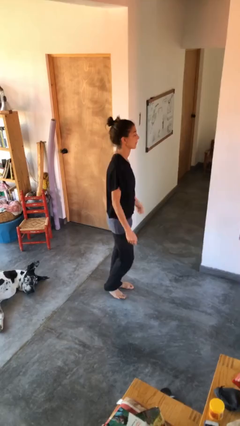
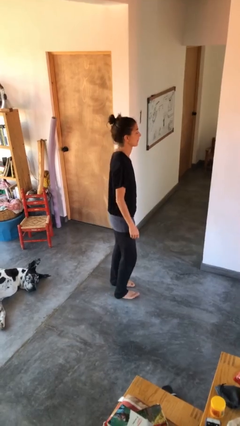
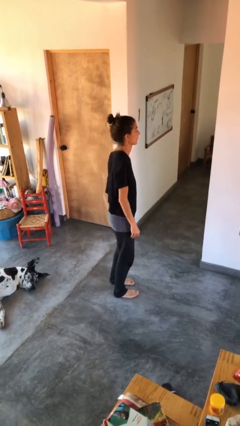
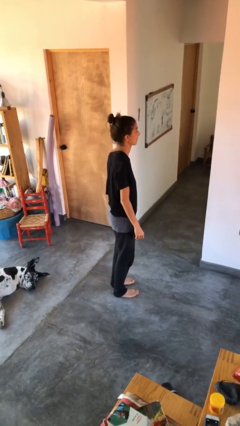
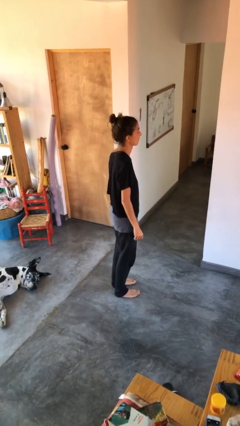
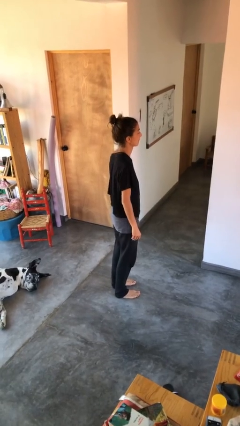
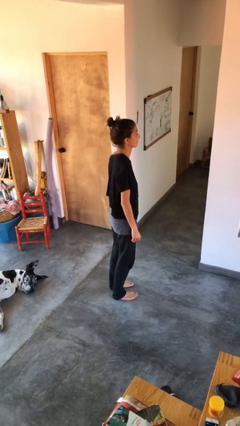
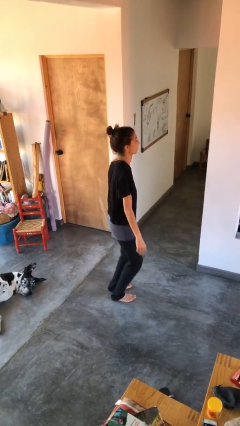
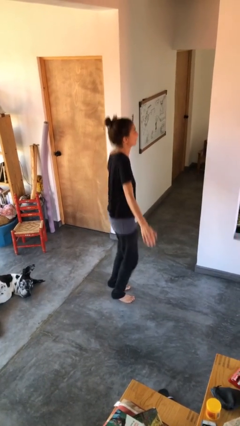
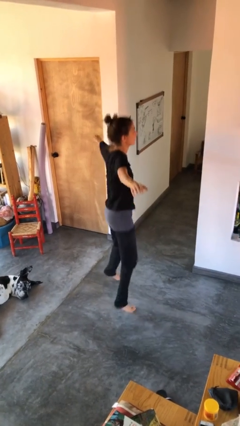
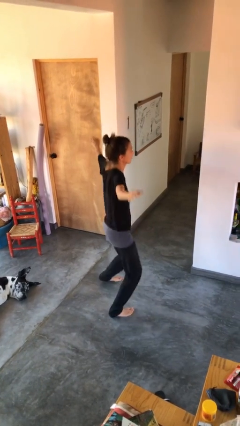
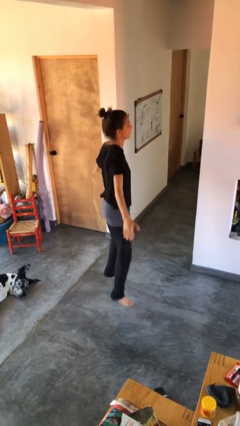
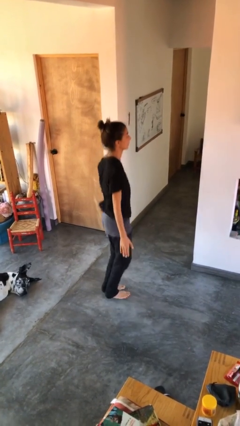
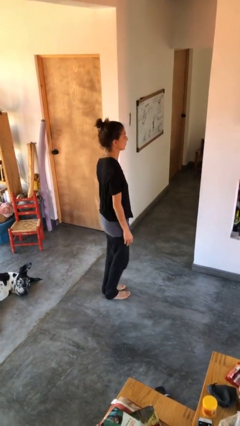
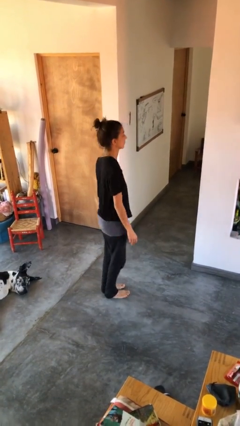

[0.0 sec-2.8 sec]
person exercises with jumping jacks

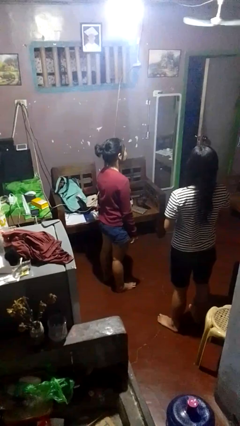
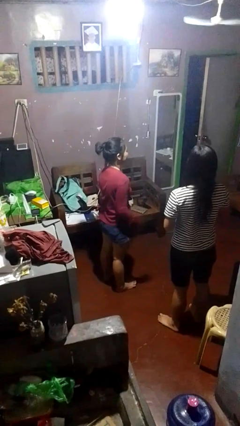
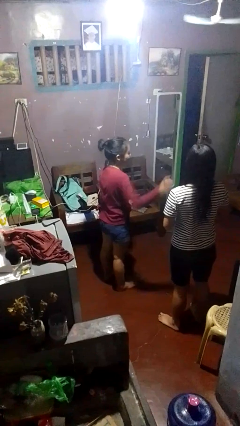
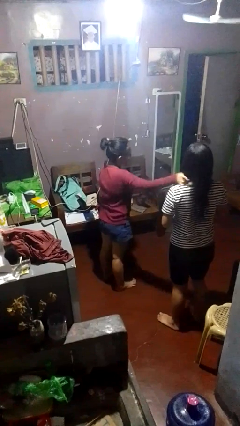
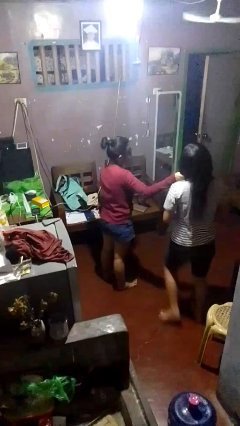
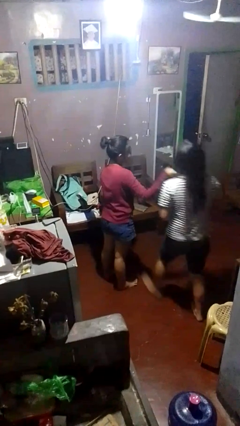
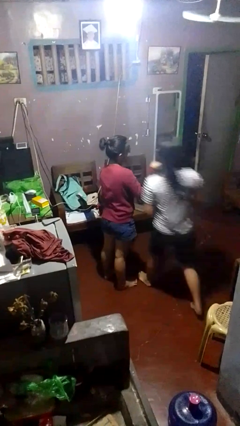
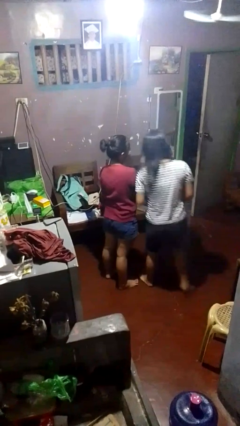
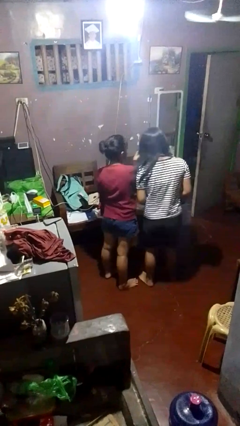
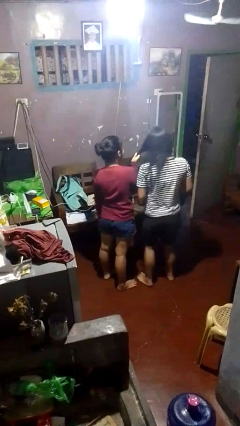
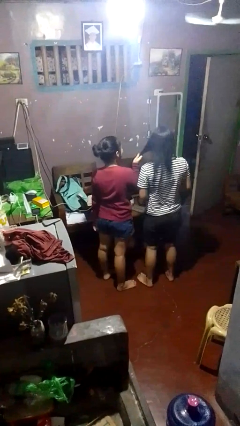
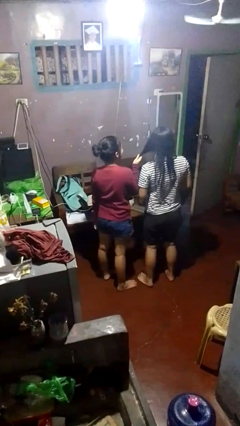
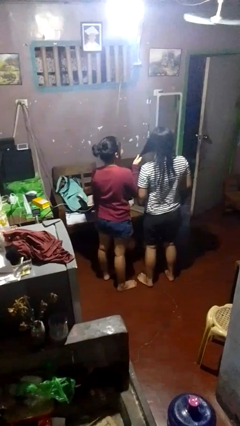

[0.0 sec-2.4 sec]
person grabs person by hair

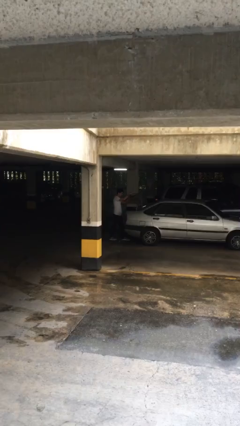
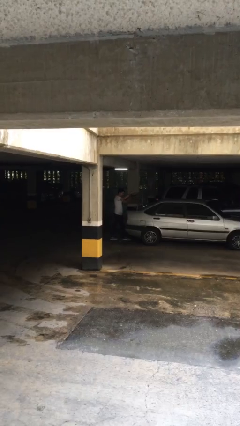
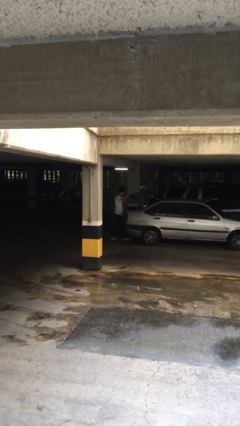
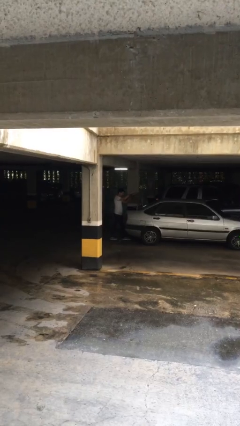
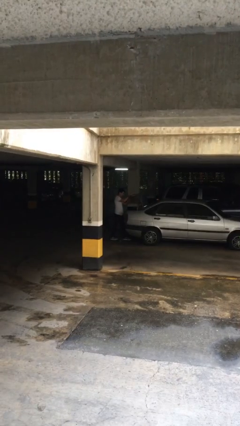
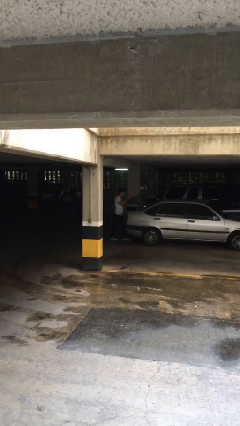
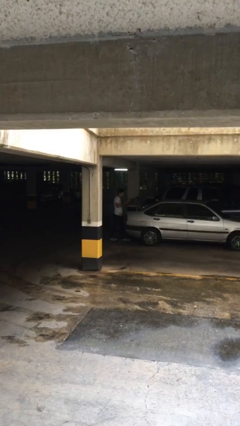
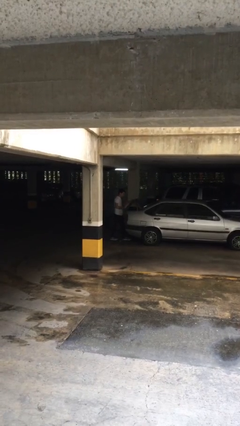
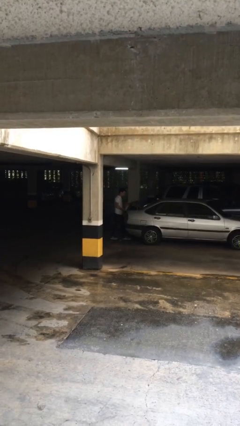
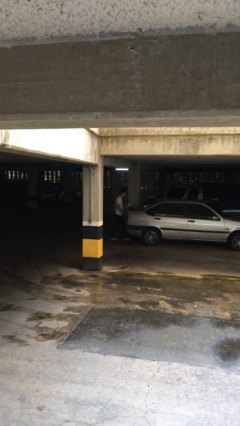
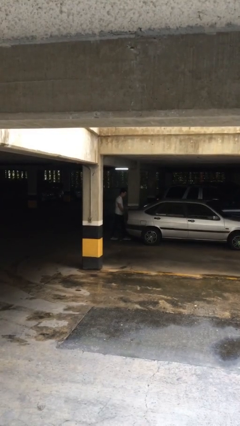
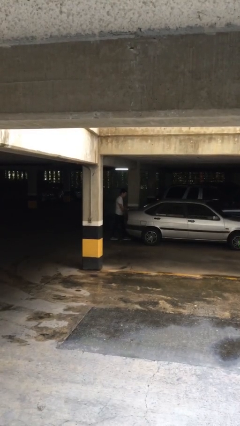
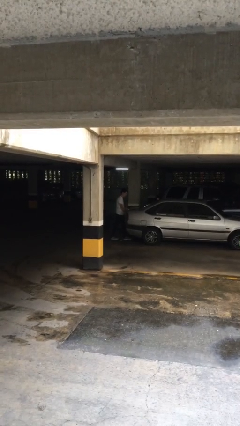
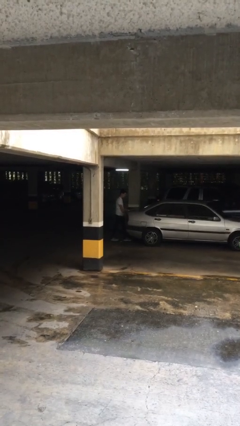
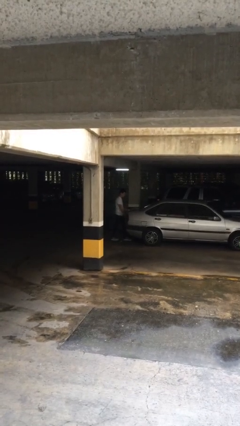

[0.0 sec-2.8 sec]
person closes car trunk

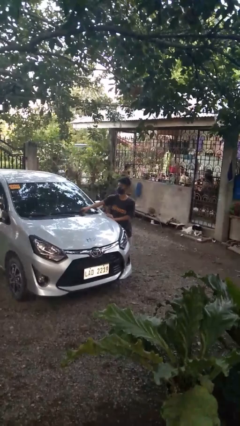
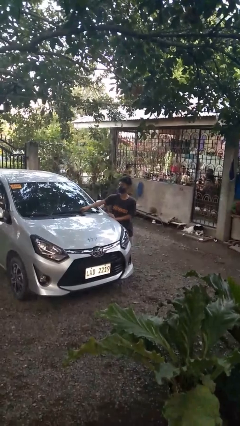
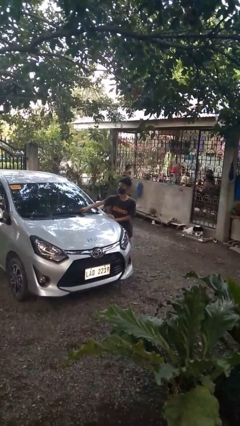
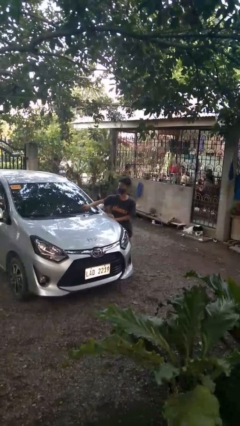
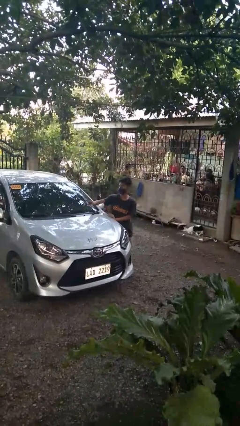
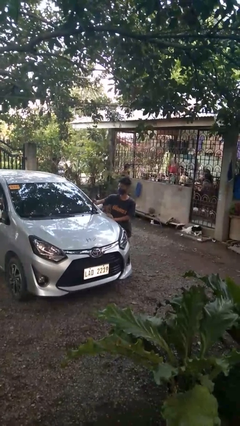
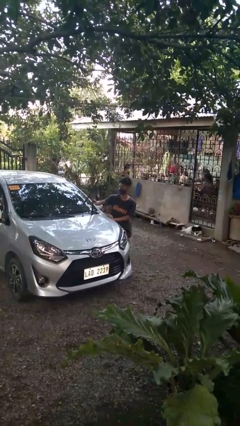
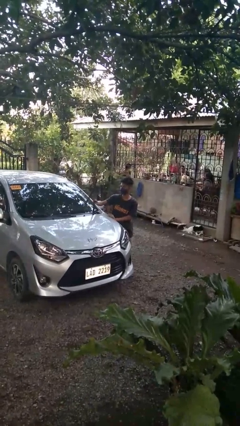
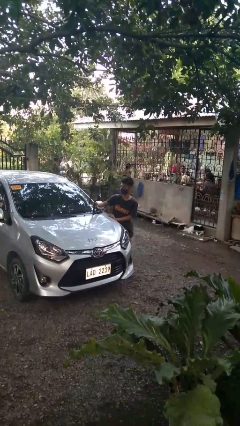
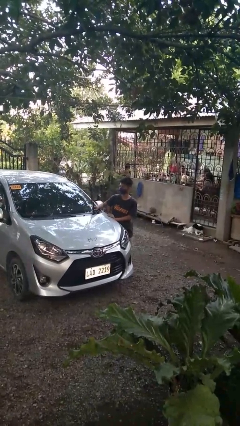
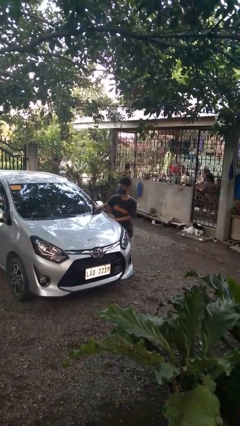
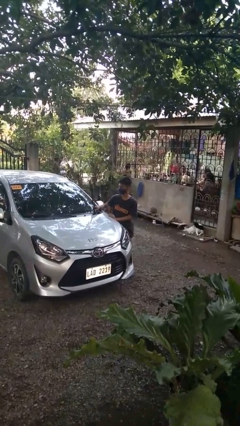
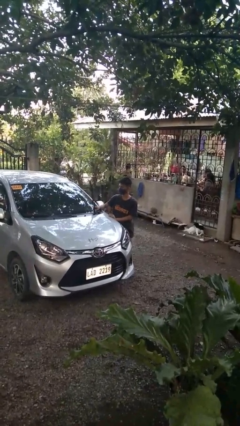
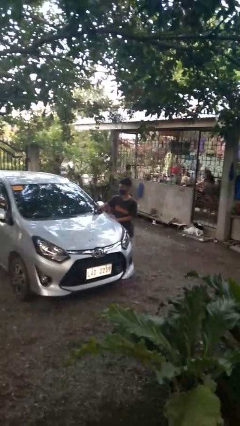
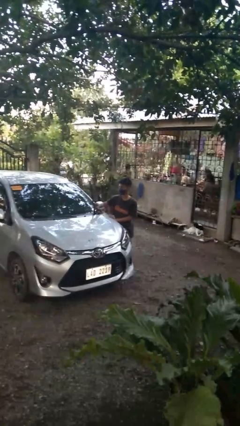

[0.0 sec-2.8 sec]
person flips up car wipers

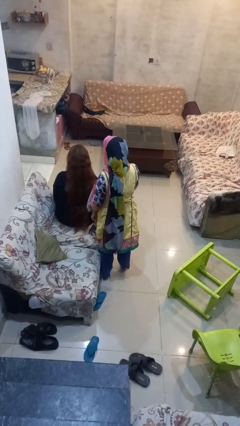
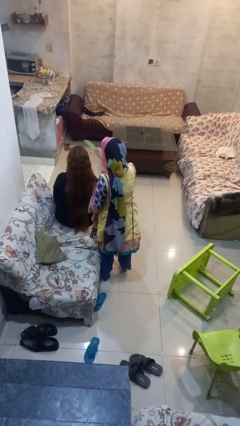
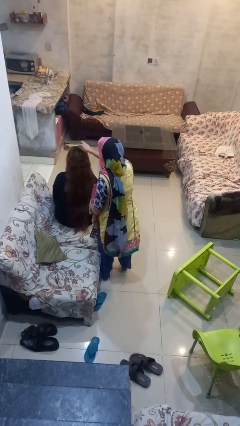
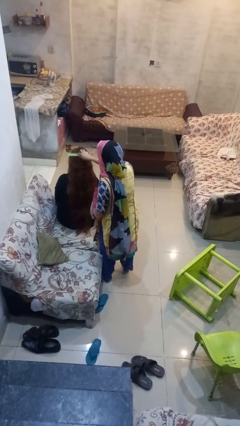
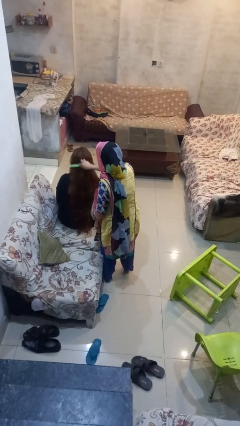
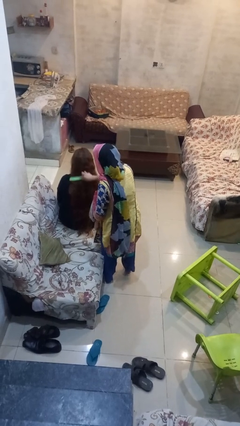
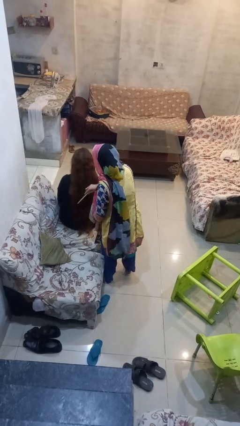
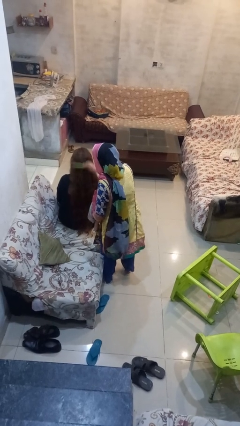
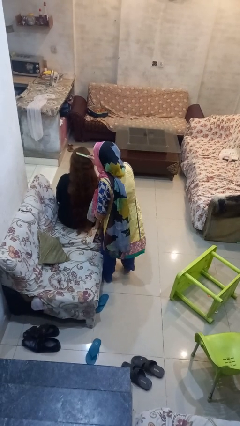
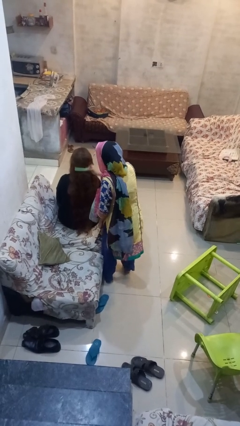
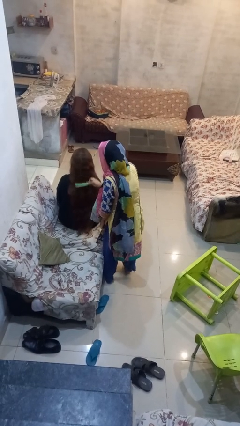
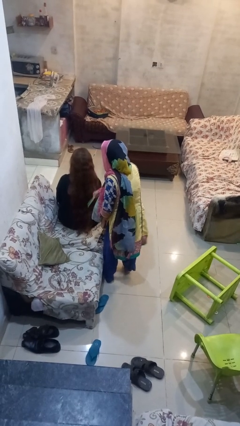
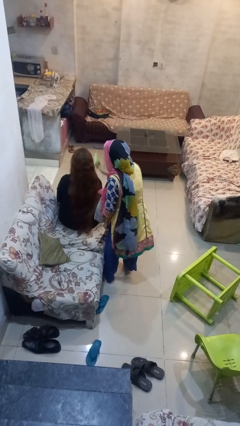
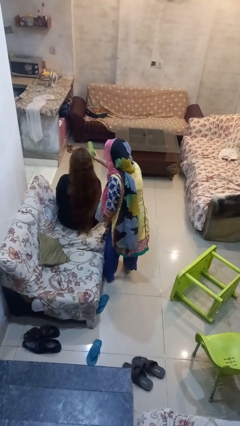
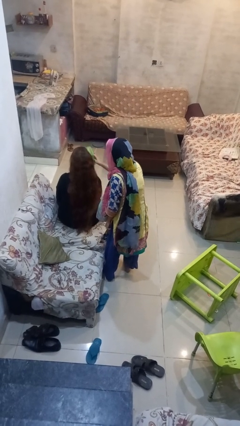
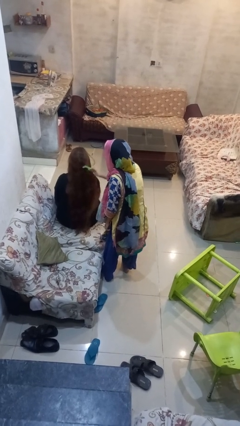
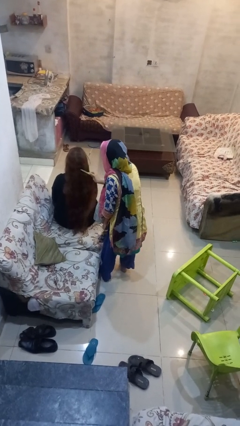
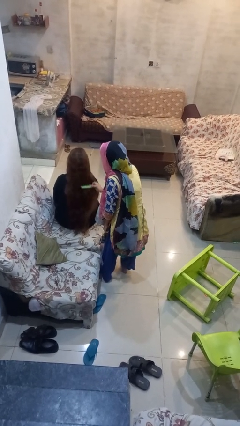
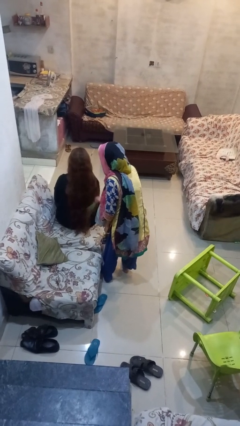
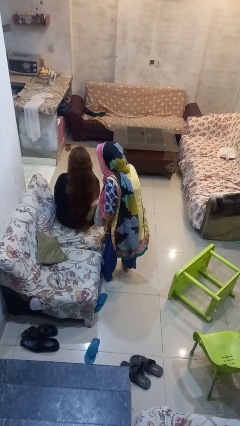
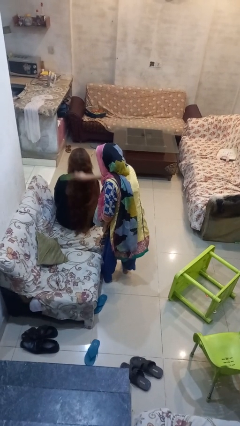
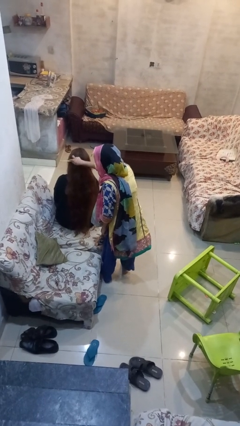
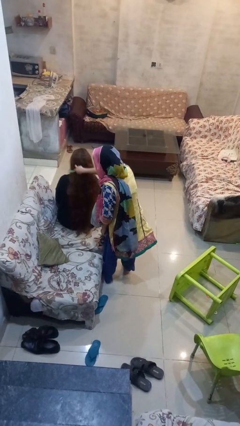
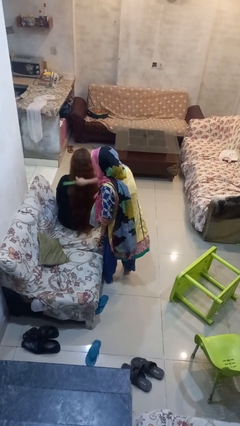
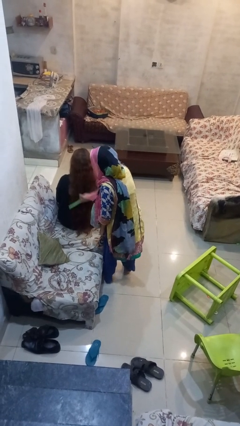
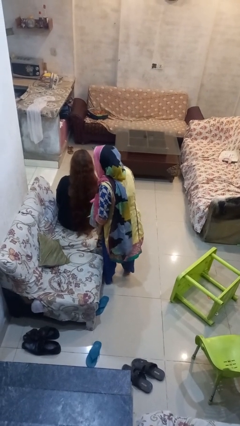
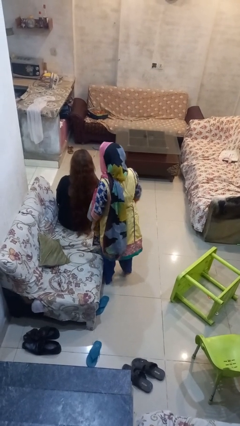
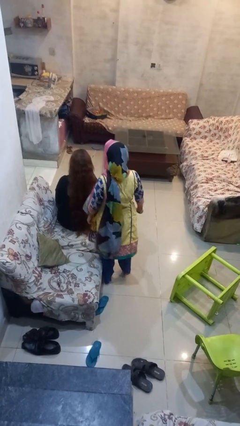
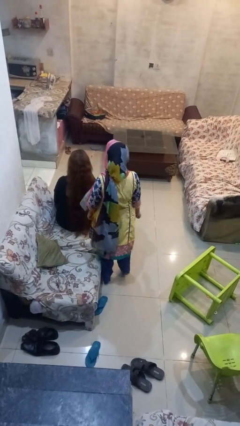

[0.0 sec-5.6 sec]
person brushes hair of person

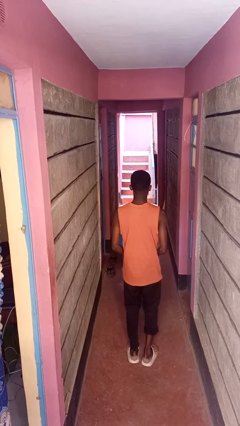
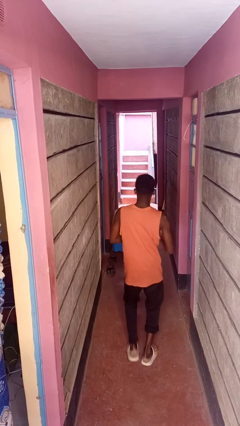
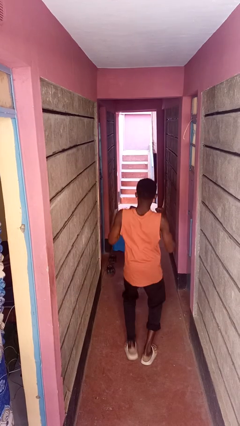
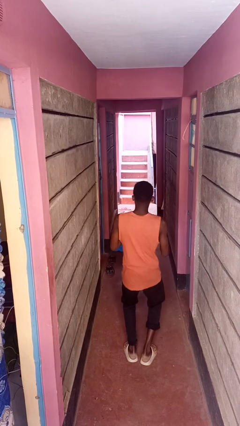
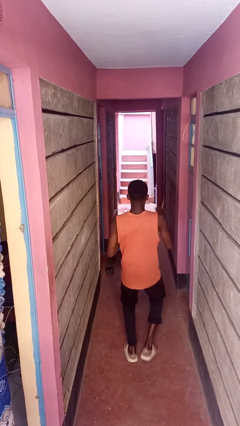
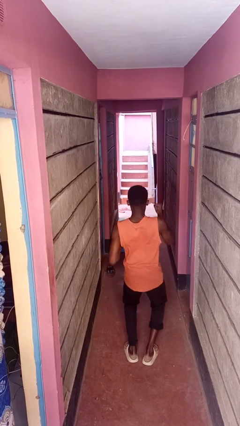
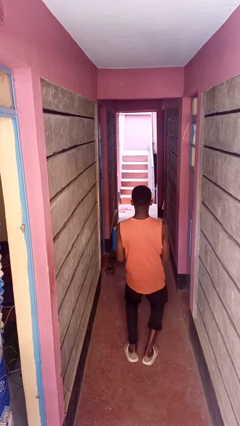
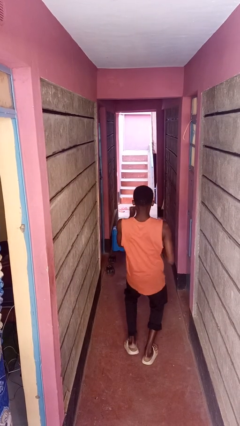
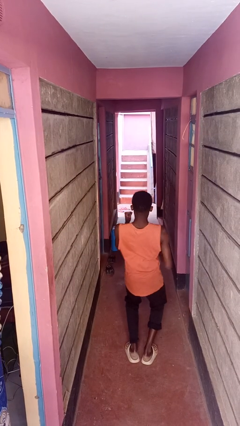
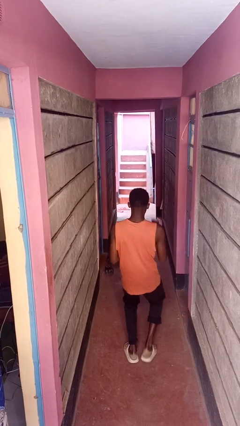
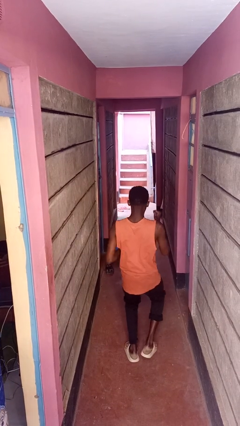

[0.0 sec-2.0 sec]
person dances in place
